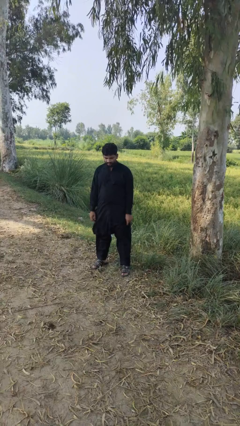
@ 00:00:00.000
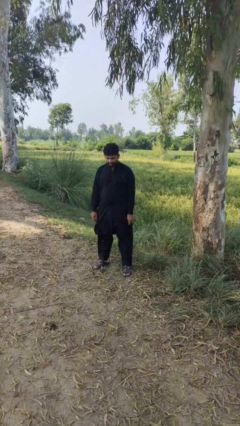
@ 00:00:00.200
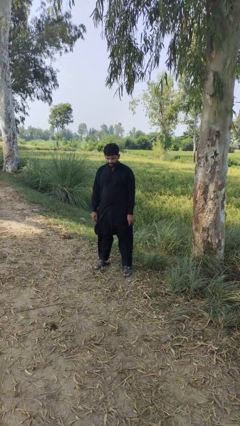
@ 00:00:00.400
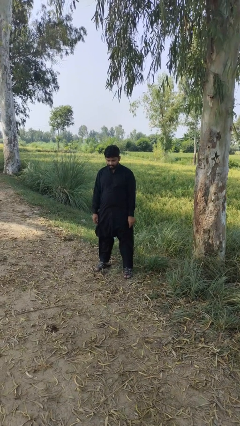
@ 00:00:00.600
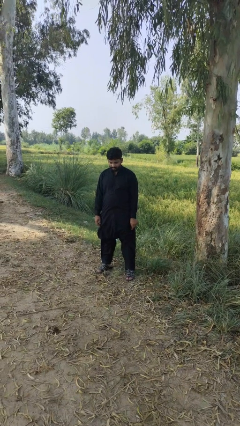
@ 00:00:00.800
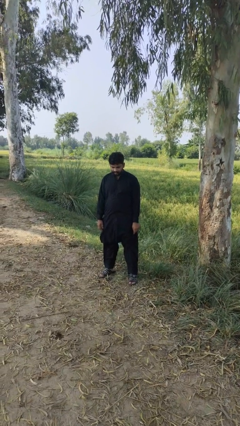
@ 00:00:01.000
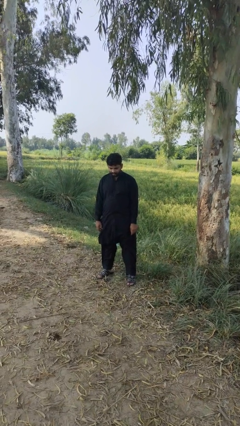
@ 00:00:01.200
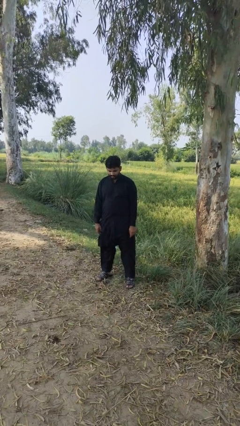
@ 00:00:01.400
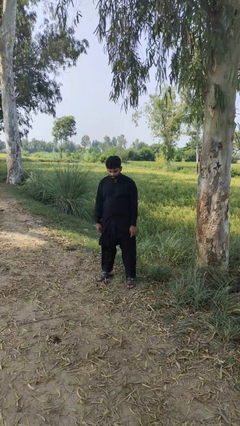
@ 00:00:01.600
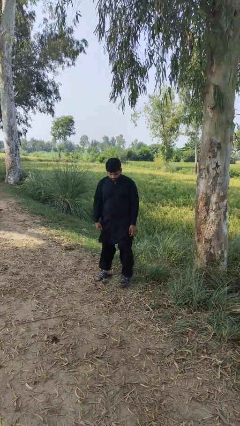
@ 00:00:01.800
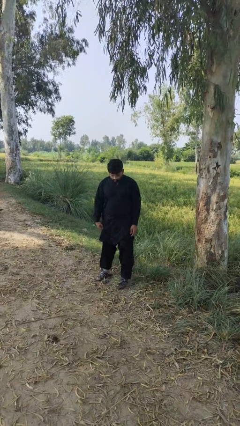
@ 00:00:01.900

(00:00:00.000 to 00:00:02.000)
person stands up from floor

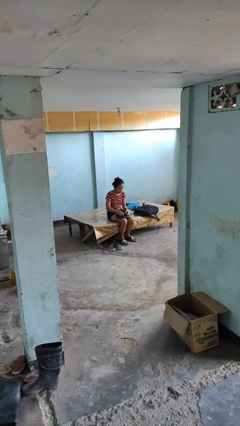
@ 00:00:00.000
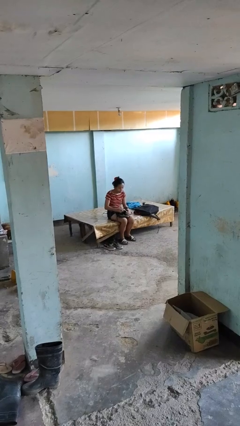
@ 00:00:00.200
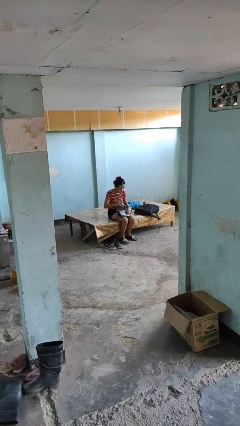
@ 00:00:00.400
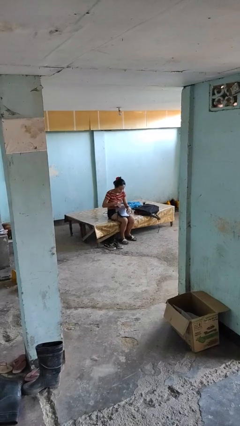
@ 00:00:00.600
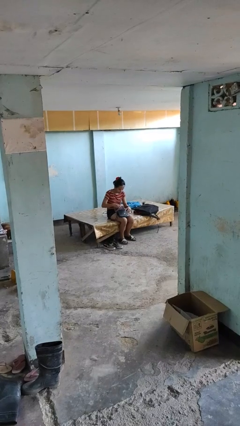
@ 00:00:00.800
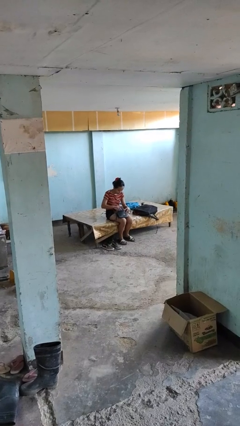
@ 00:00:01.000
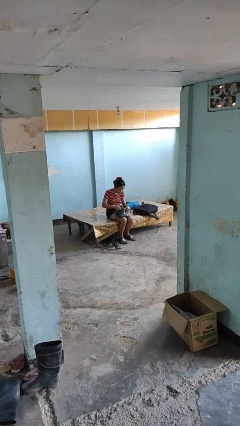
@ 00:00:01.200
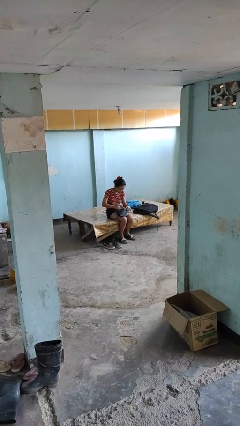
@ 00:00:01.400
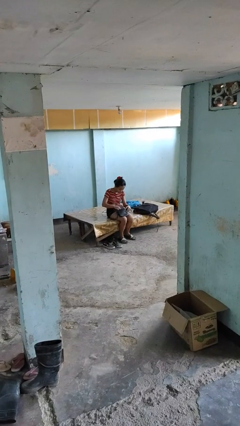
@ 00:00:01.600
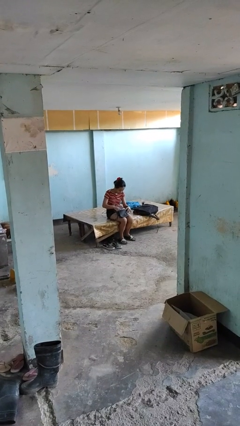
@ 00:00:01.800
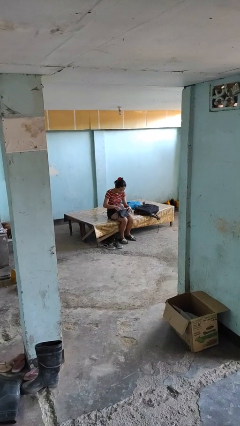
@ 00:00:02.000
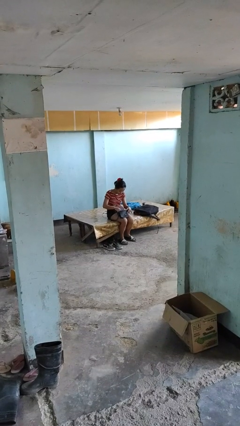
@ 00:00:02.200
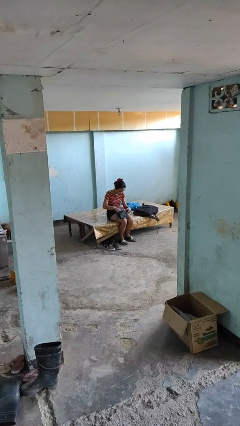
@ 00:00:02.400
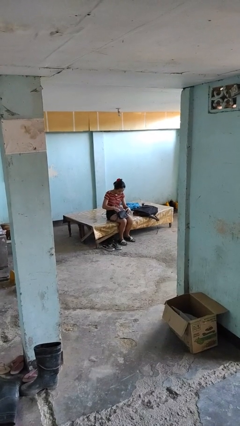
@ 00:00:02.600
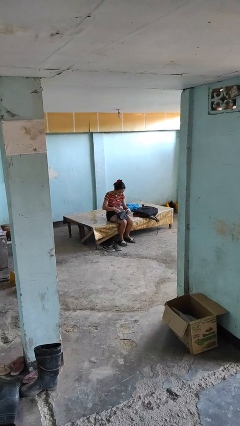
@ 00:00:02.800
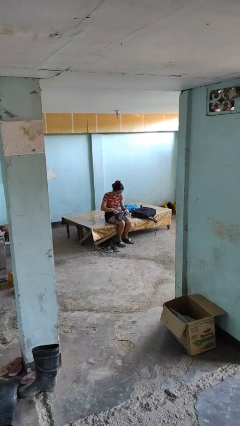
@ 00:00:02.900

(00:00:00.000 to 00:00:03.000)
person searches in purse

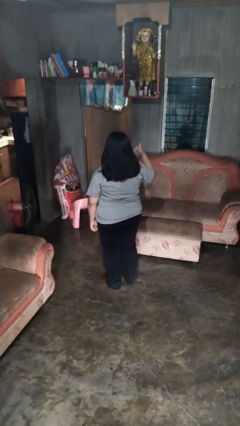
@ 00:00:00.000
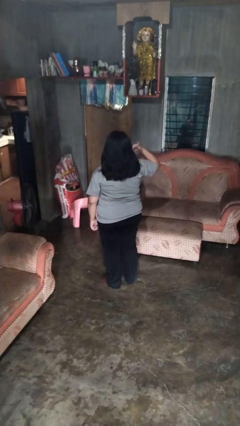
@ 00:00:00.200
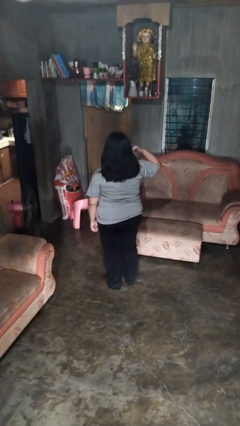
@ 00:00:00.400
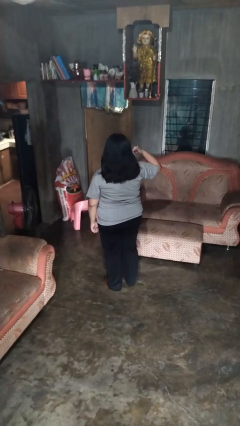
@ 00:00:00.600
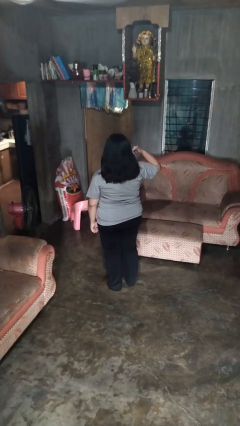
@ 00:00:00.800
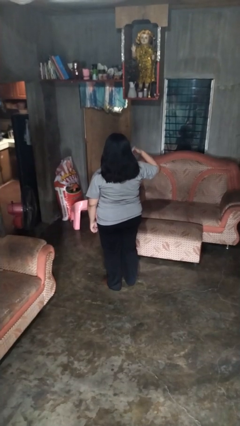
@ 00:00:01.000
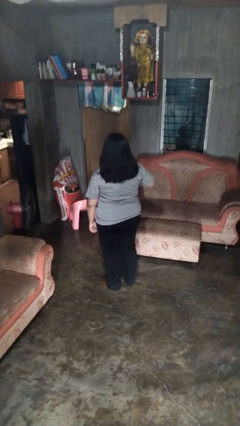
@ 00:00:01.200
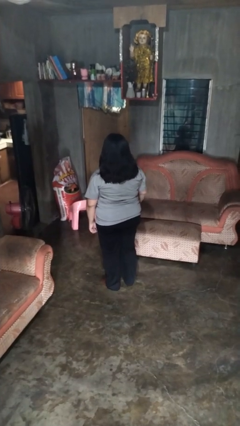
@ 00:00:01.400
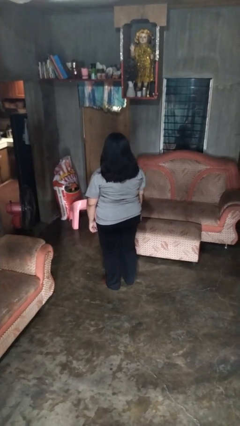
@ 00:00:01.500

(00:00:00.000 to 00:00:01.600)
person gestures call me

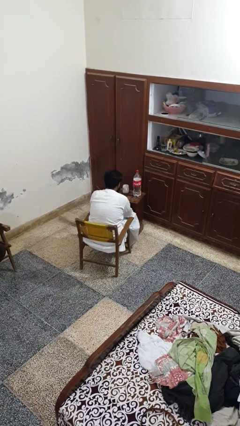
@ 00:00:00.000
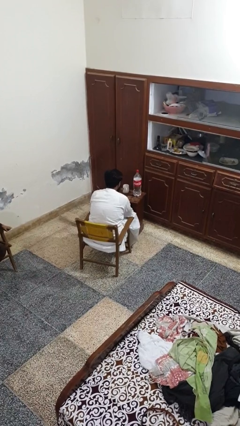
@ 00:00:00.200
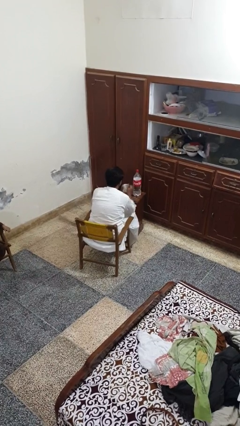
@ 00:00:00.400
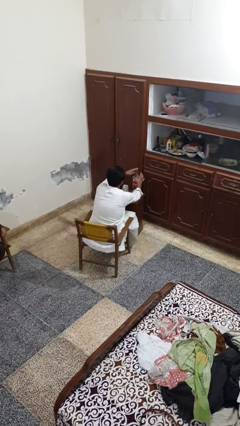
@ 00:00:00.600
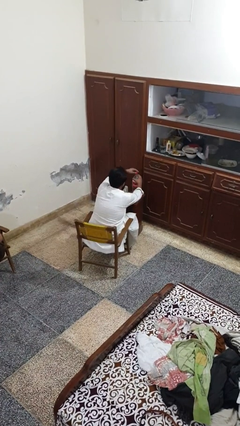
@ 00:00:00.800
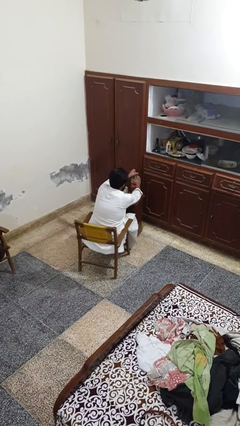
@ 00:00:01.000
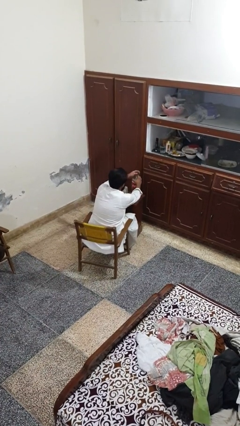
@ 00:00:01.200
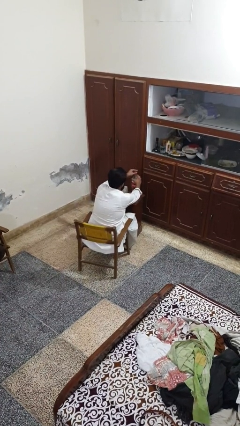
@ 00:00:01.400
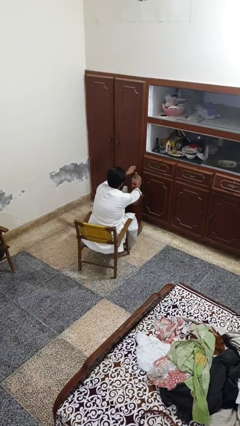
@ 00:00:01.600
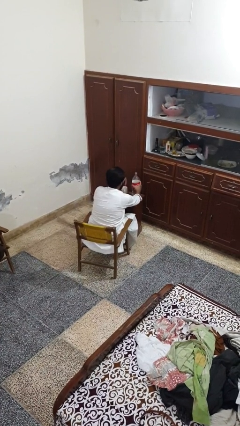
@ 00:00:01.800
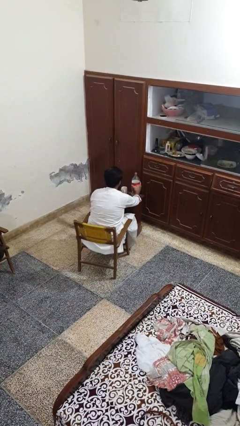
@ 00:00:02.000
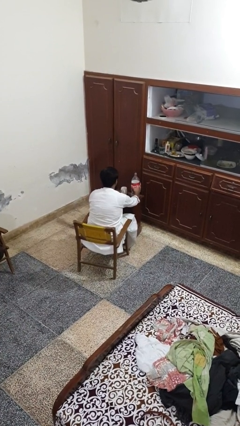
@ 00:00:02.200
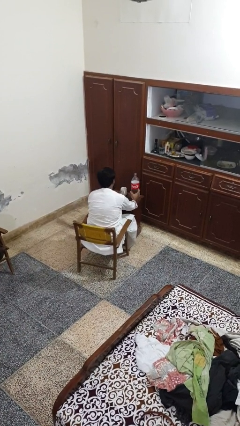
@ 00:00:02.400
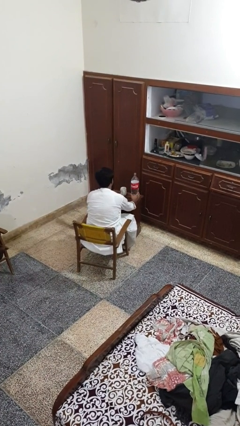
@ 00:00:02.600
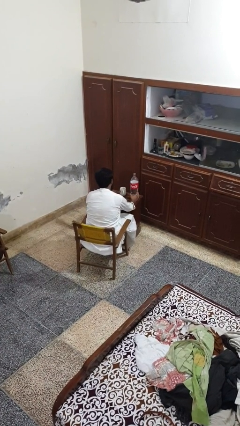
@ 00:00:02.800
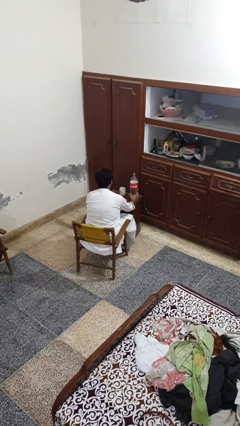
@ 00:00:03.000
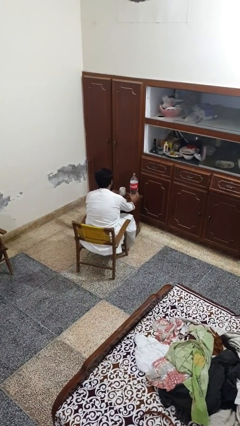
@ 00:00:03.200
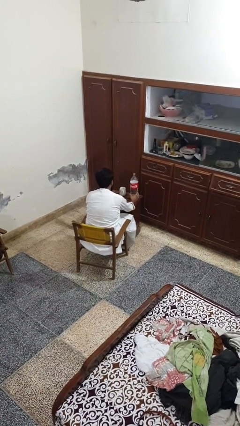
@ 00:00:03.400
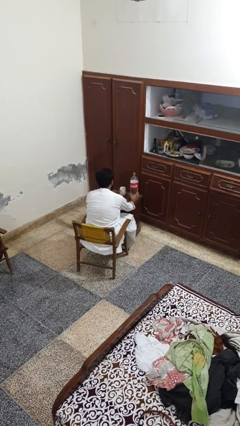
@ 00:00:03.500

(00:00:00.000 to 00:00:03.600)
person unscrews lid from bottle

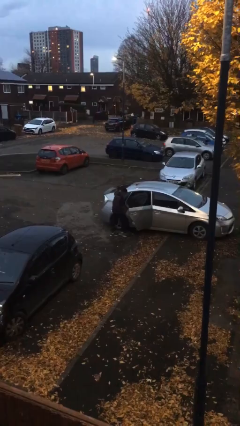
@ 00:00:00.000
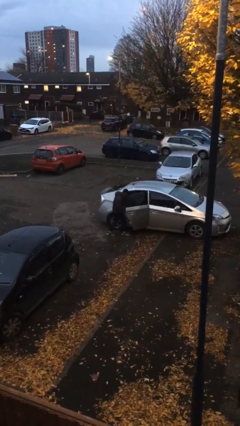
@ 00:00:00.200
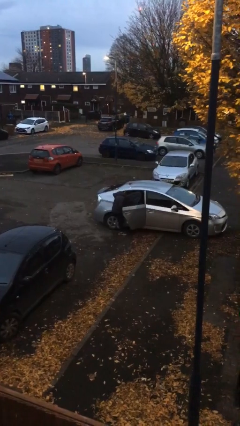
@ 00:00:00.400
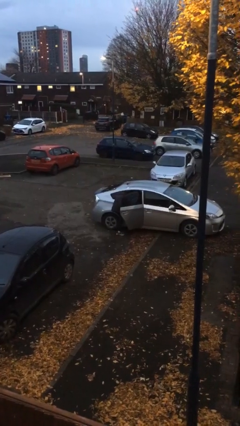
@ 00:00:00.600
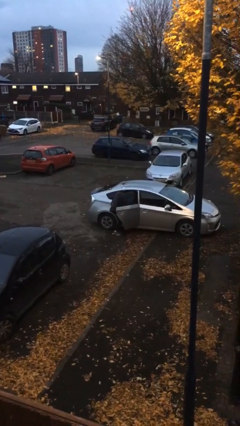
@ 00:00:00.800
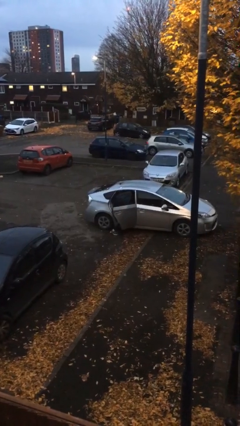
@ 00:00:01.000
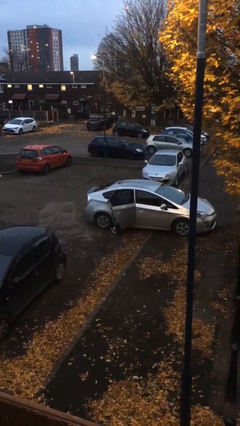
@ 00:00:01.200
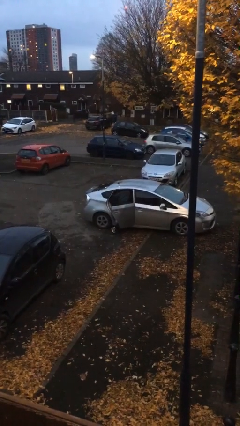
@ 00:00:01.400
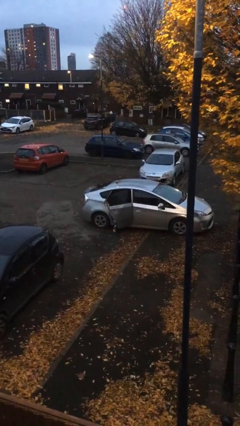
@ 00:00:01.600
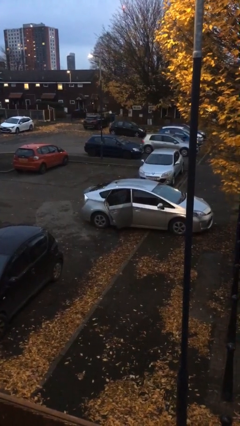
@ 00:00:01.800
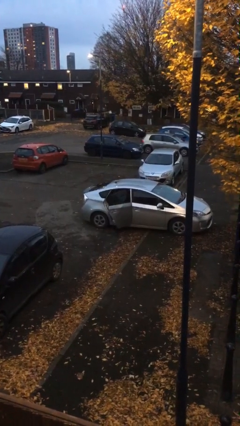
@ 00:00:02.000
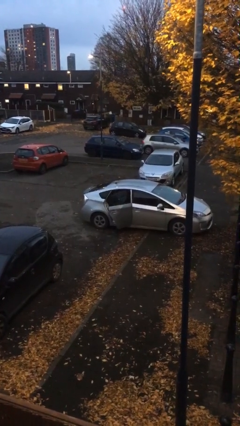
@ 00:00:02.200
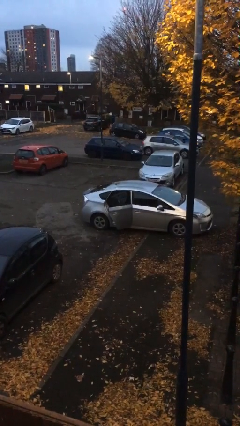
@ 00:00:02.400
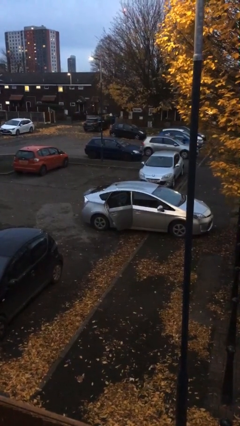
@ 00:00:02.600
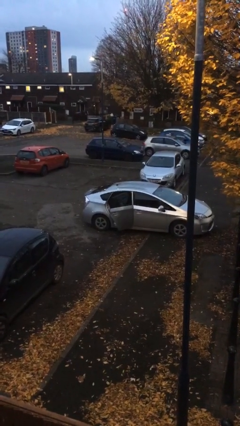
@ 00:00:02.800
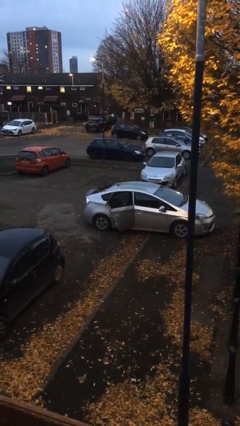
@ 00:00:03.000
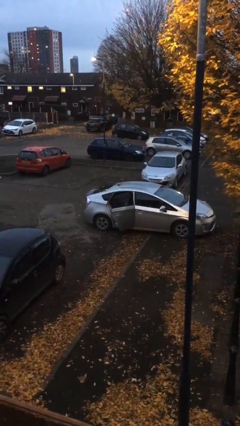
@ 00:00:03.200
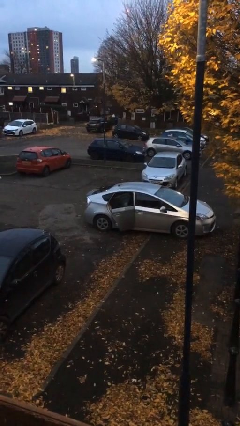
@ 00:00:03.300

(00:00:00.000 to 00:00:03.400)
person enters car

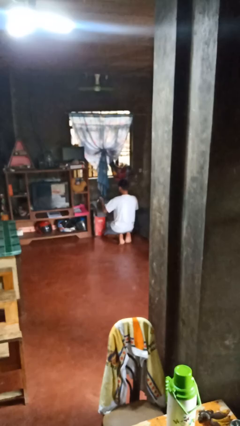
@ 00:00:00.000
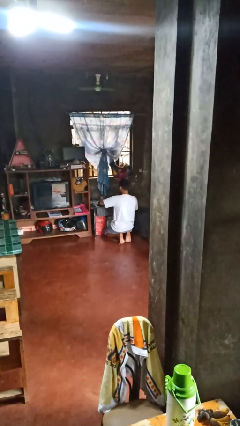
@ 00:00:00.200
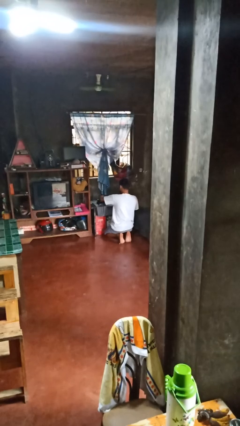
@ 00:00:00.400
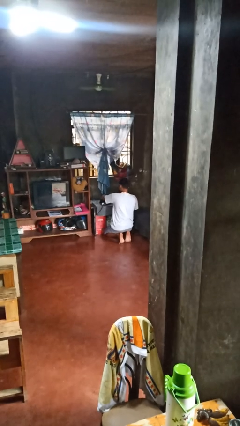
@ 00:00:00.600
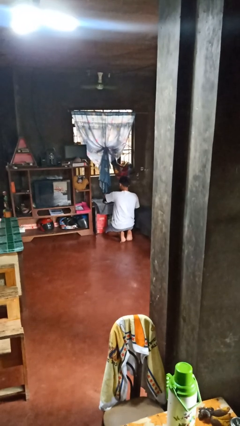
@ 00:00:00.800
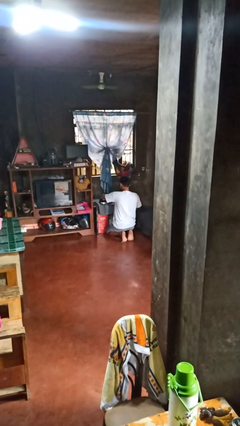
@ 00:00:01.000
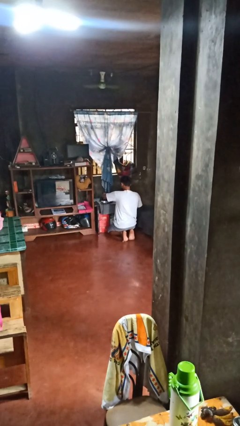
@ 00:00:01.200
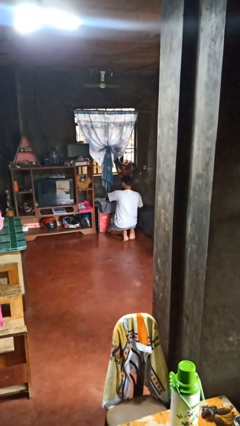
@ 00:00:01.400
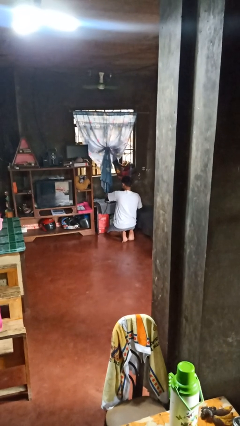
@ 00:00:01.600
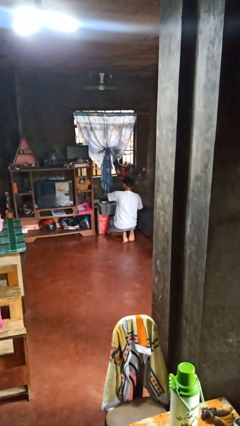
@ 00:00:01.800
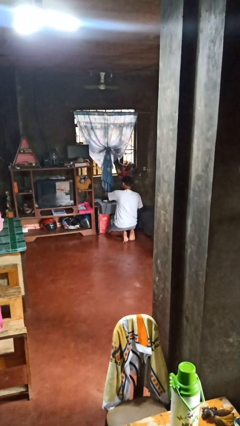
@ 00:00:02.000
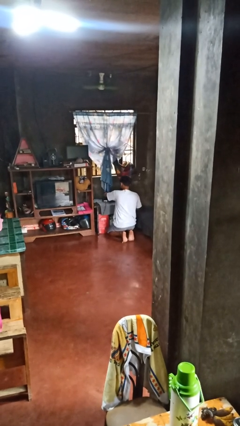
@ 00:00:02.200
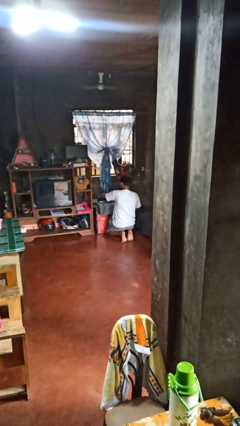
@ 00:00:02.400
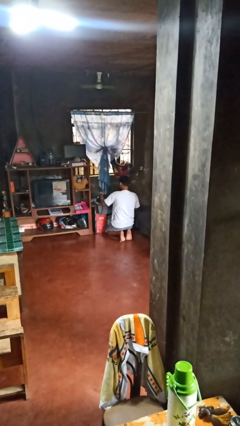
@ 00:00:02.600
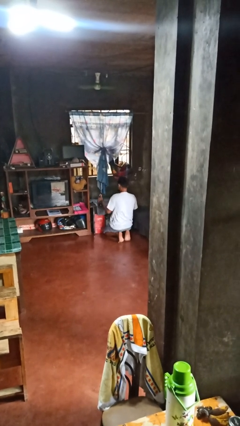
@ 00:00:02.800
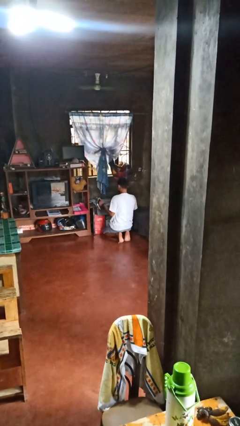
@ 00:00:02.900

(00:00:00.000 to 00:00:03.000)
person irons clothes

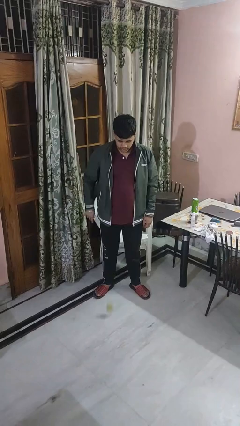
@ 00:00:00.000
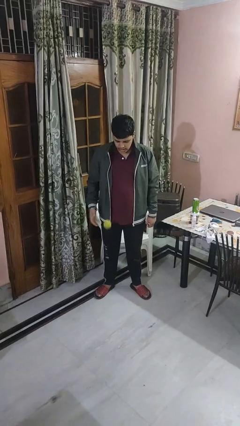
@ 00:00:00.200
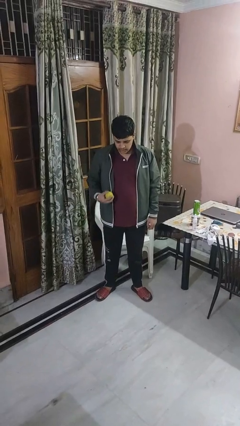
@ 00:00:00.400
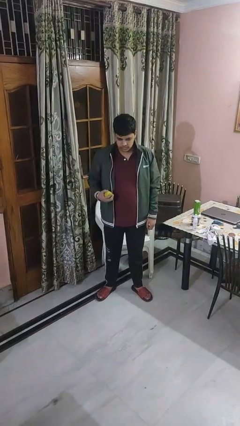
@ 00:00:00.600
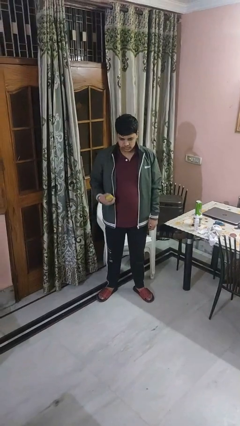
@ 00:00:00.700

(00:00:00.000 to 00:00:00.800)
person bounces ball on floor
